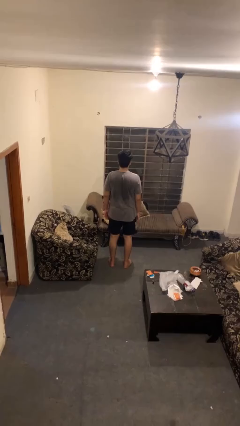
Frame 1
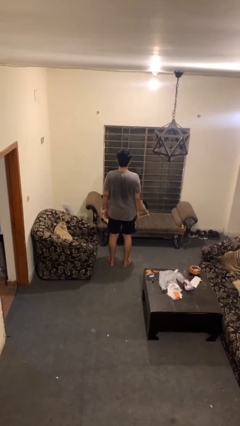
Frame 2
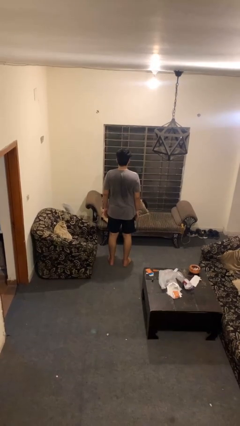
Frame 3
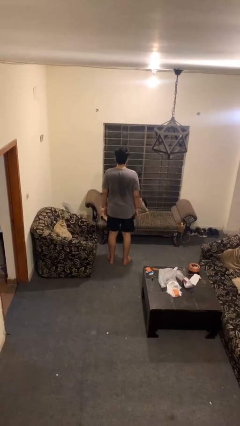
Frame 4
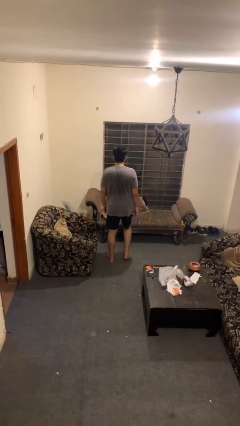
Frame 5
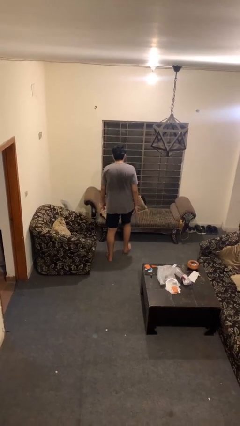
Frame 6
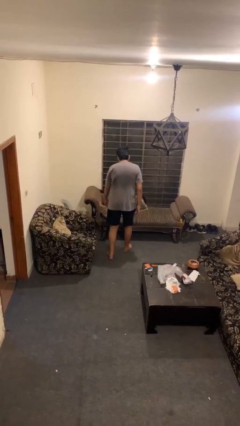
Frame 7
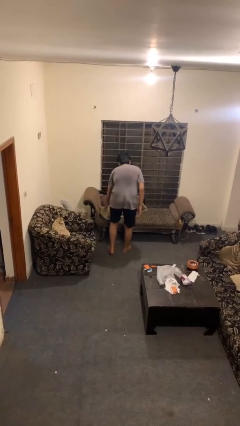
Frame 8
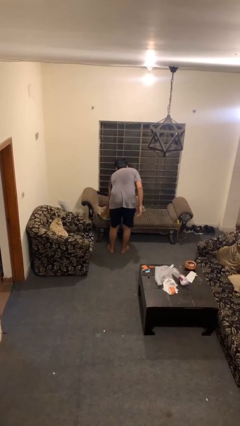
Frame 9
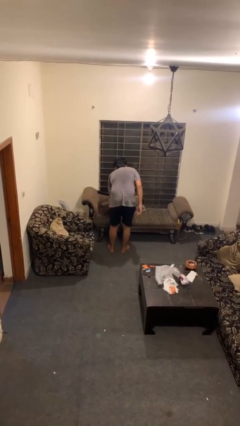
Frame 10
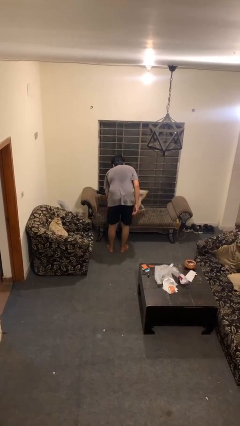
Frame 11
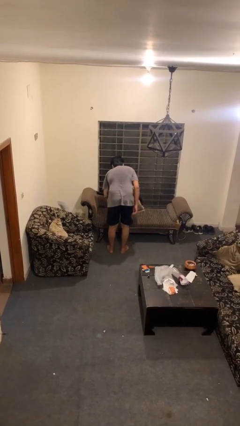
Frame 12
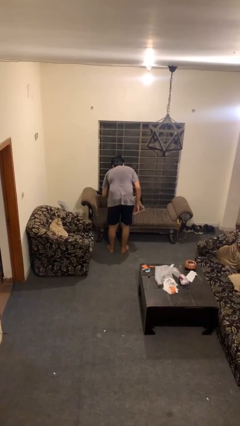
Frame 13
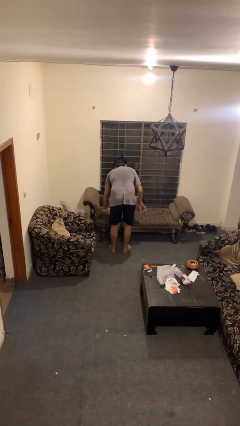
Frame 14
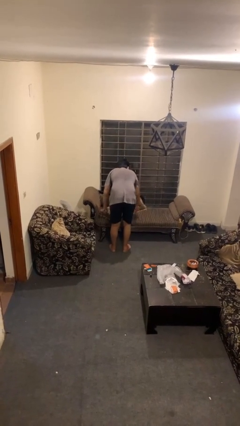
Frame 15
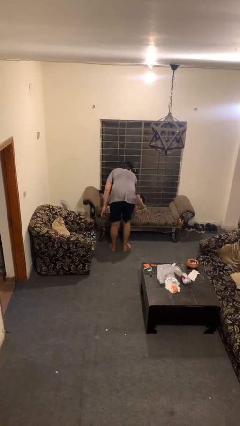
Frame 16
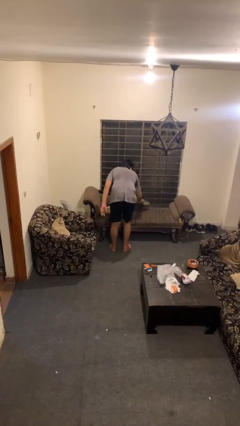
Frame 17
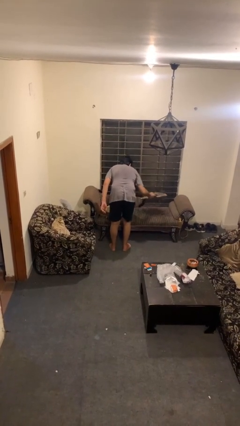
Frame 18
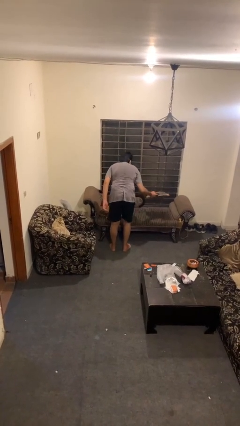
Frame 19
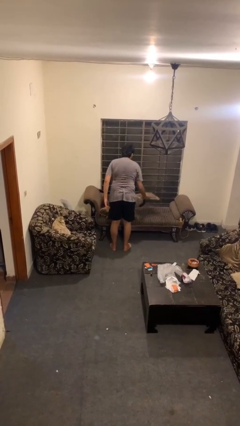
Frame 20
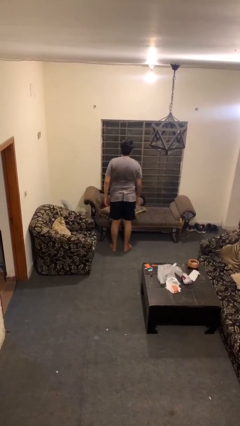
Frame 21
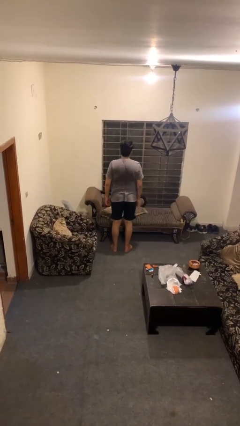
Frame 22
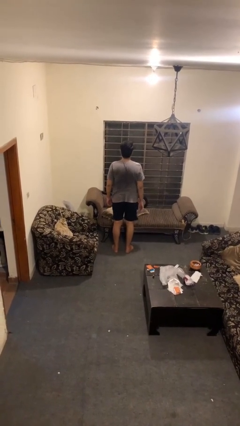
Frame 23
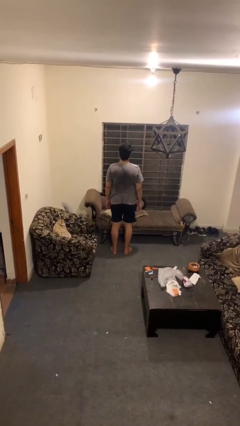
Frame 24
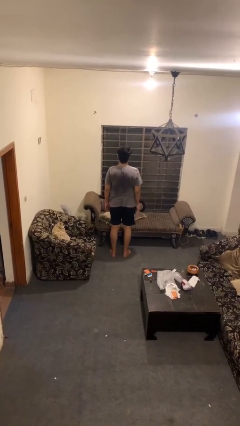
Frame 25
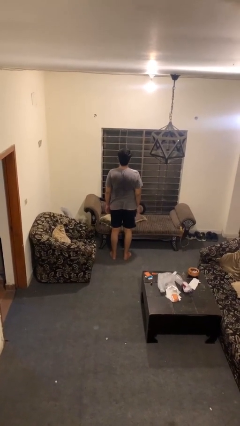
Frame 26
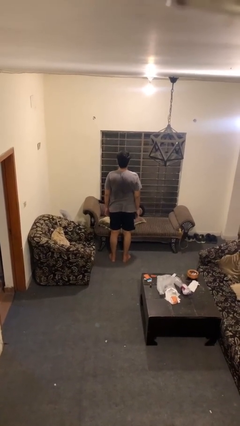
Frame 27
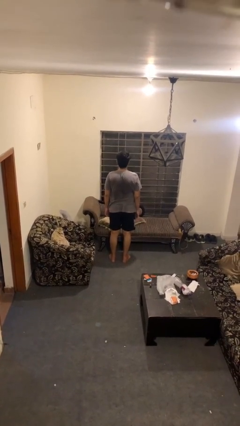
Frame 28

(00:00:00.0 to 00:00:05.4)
person searches in couch

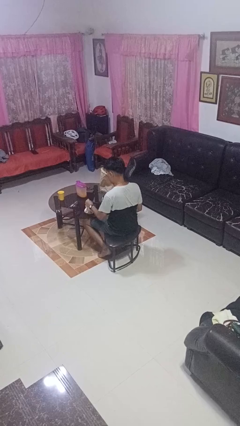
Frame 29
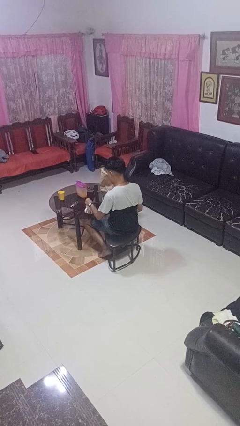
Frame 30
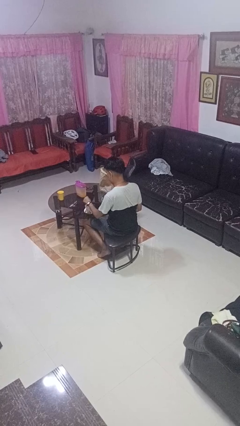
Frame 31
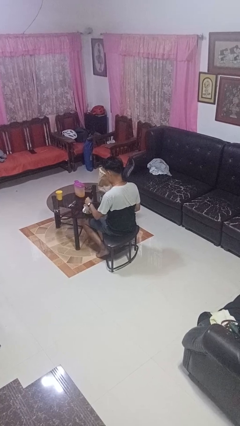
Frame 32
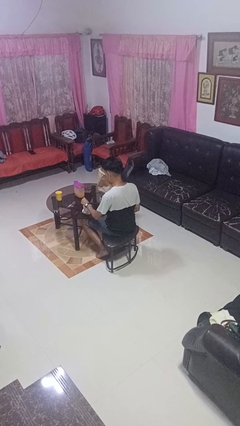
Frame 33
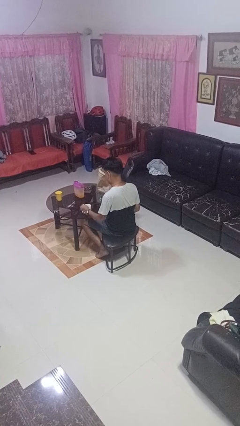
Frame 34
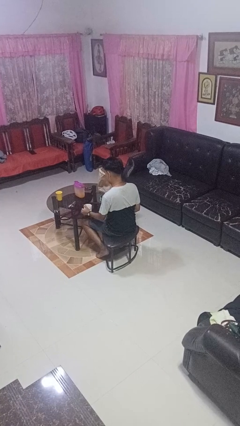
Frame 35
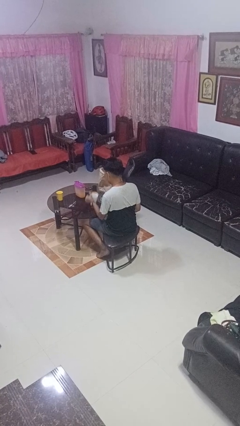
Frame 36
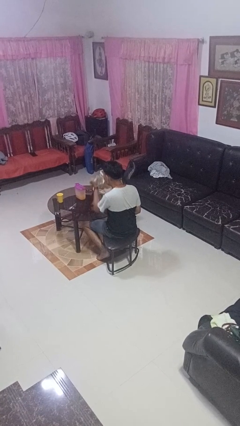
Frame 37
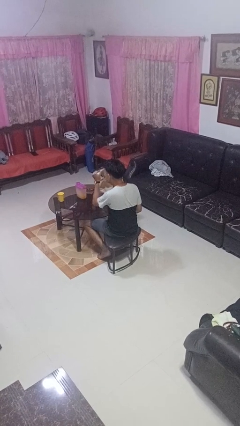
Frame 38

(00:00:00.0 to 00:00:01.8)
person stirs mug

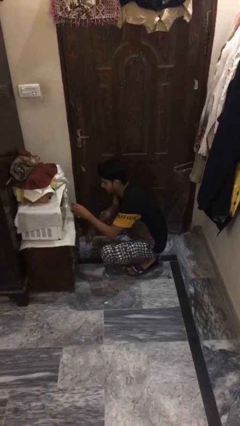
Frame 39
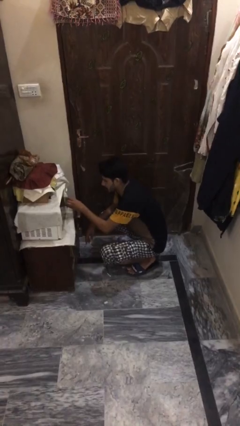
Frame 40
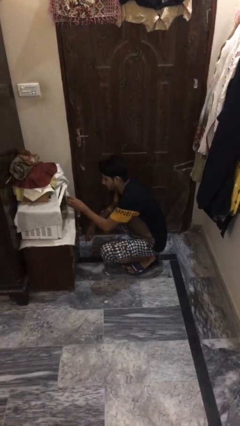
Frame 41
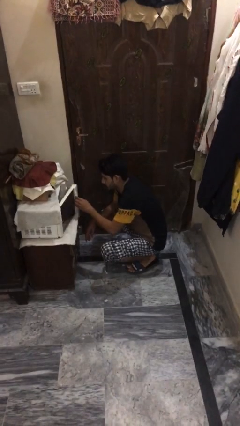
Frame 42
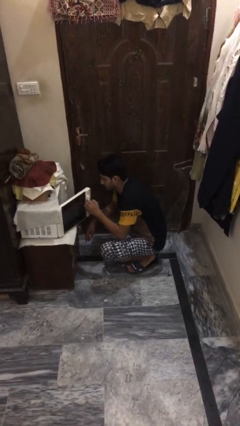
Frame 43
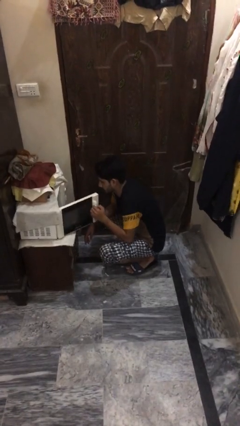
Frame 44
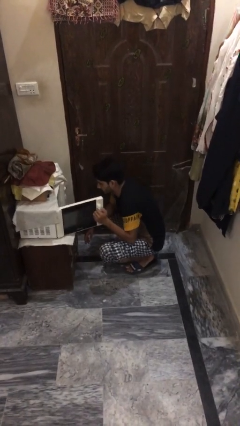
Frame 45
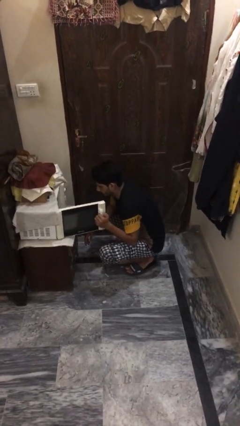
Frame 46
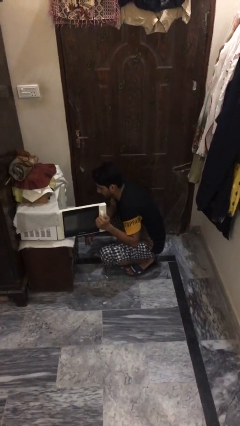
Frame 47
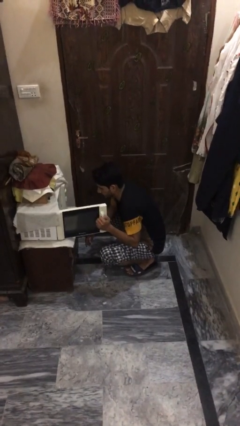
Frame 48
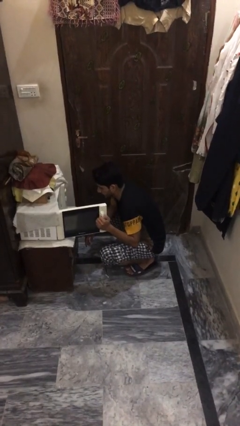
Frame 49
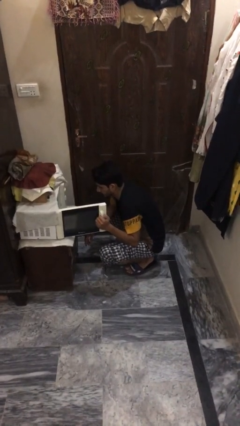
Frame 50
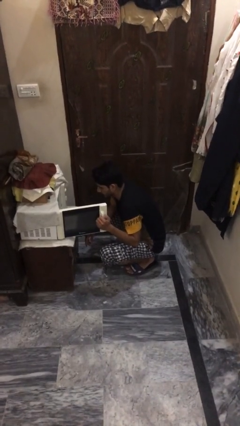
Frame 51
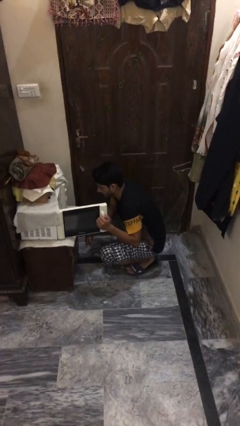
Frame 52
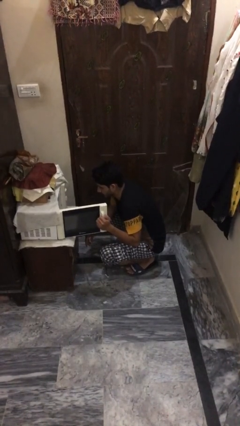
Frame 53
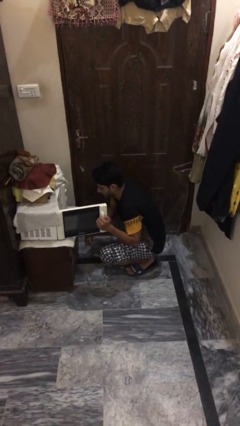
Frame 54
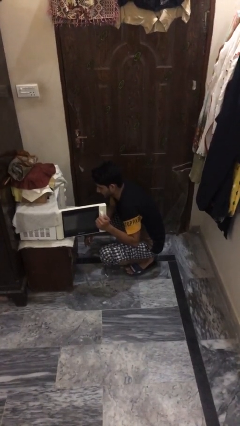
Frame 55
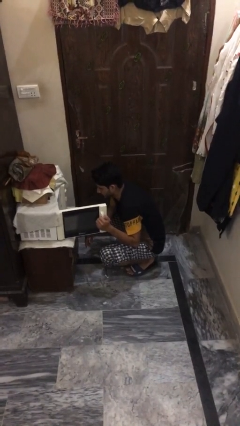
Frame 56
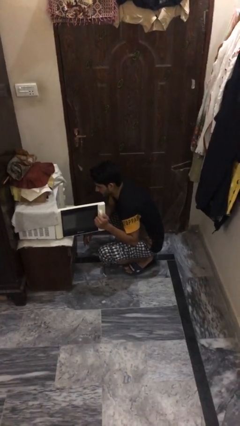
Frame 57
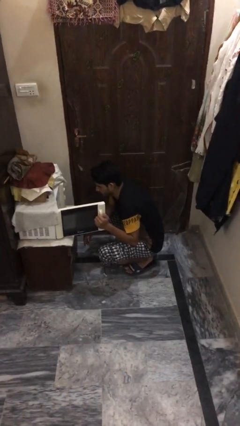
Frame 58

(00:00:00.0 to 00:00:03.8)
person opens microwave

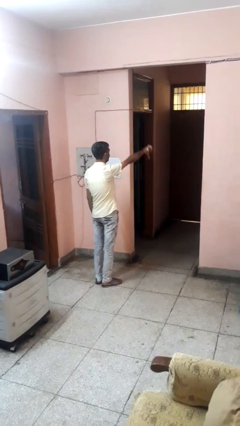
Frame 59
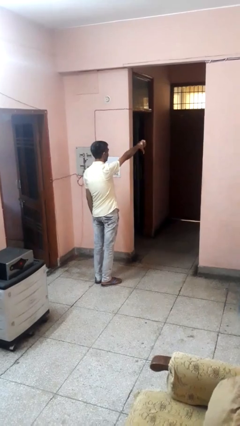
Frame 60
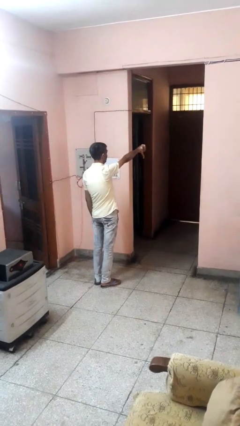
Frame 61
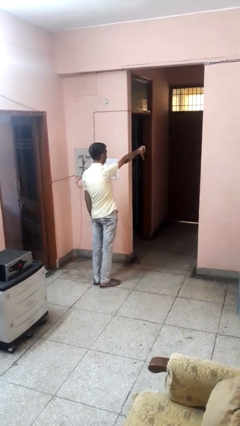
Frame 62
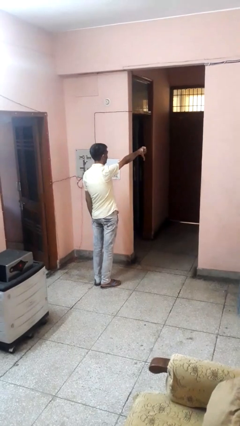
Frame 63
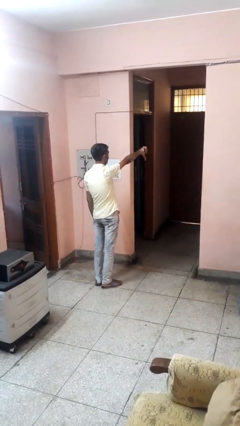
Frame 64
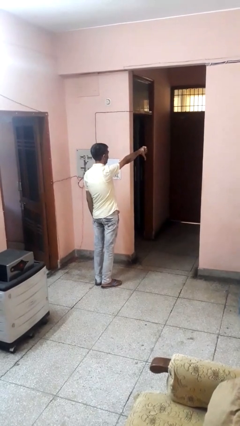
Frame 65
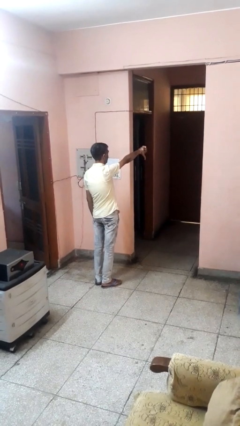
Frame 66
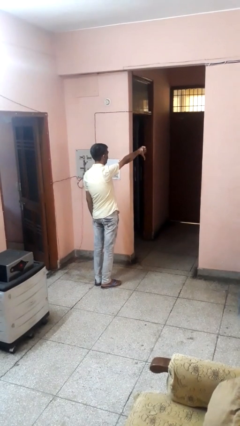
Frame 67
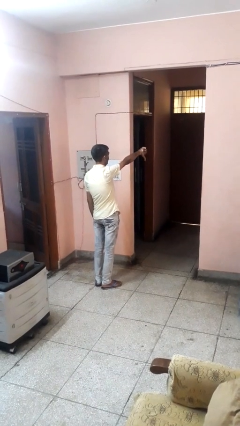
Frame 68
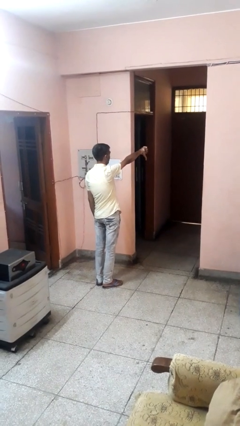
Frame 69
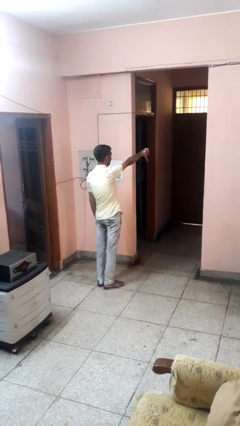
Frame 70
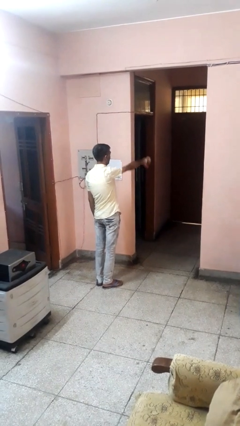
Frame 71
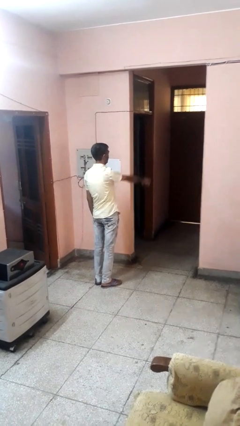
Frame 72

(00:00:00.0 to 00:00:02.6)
person gestures thumbs down

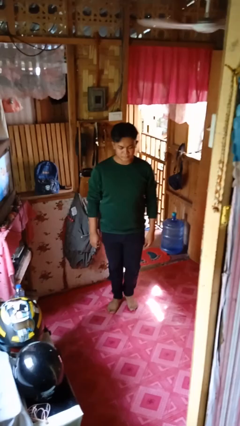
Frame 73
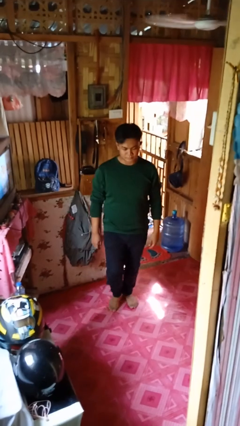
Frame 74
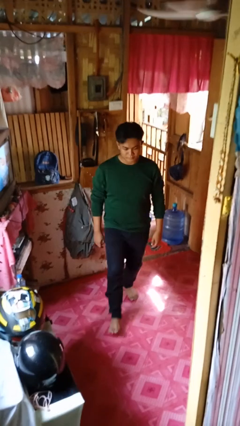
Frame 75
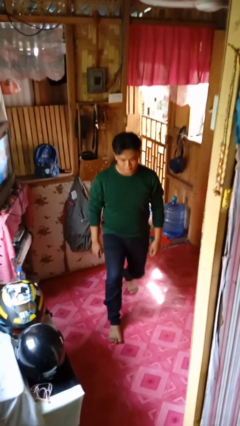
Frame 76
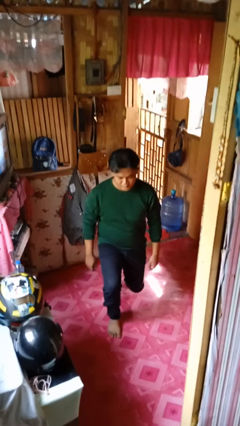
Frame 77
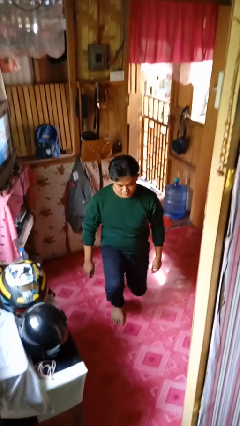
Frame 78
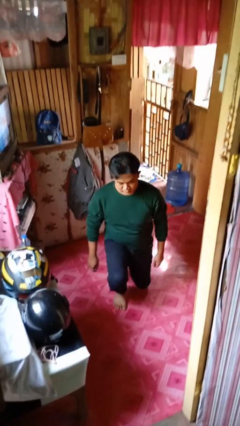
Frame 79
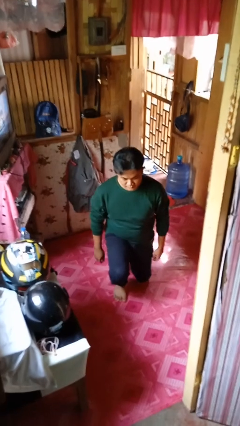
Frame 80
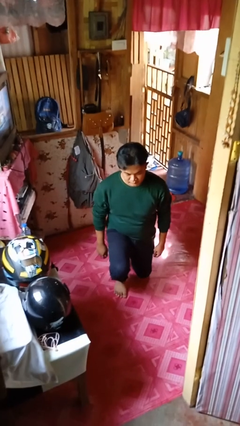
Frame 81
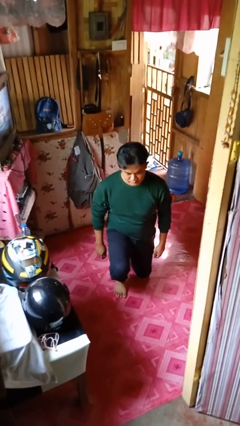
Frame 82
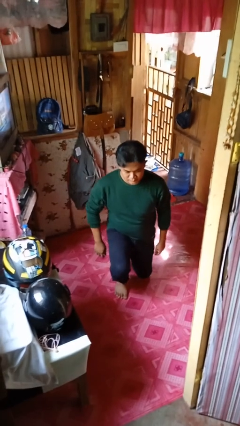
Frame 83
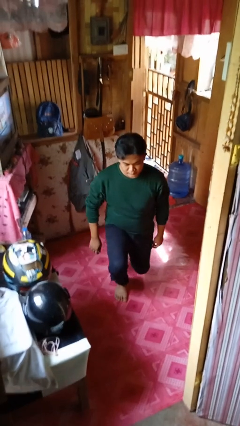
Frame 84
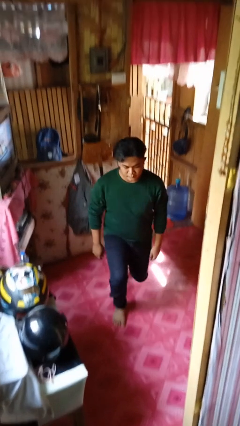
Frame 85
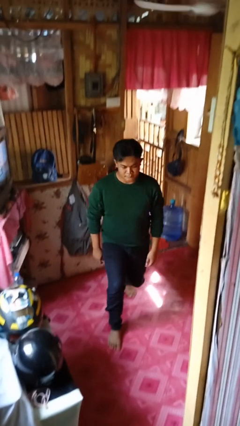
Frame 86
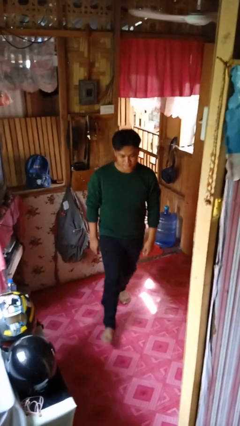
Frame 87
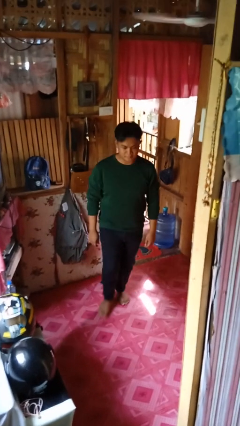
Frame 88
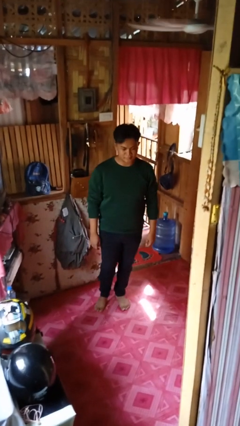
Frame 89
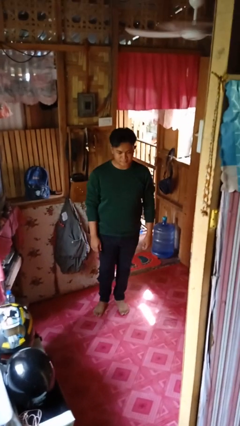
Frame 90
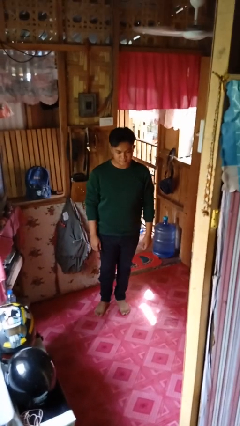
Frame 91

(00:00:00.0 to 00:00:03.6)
person exercises with lunges
